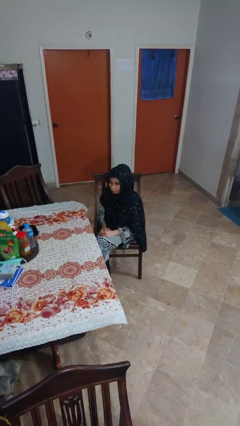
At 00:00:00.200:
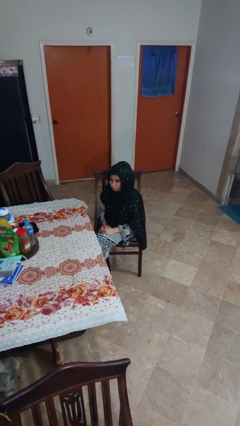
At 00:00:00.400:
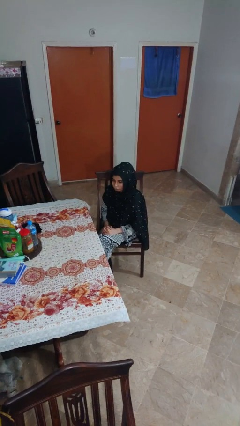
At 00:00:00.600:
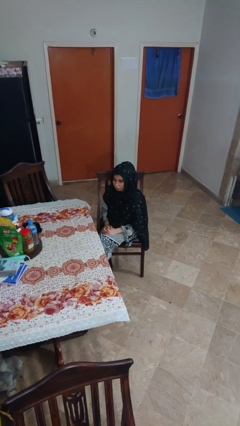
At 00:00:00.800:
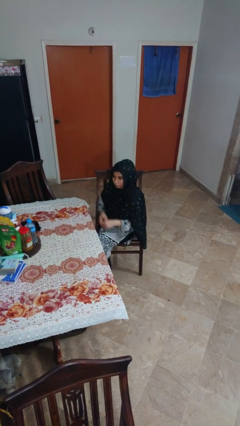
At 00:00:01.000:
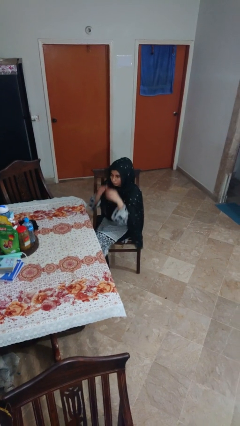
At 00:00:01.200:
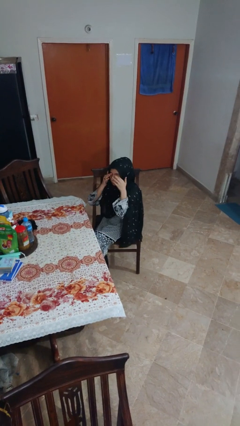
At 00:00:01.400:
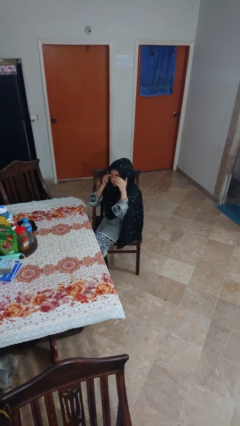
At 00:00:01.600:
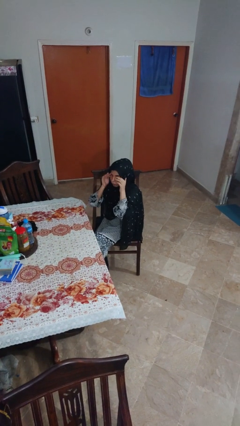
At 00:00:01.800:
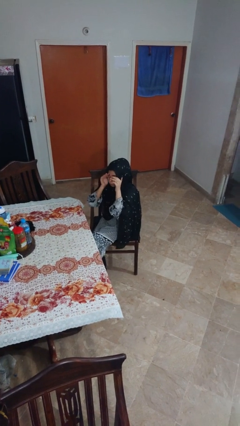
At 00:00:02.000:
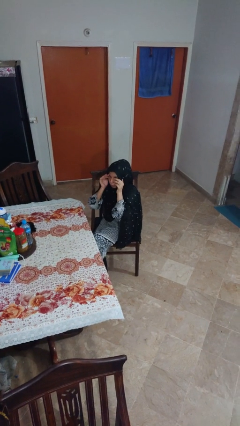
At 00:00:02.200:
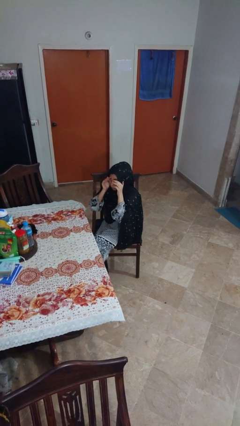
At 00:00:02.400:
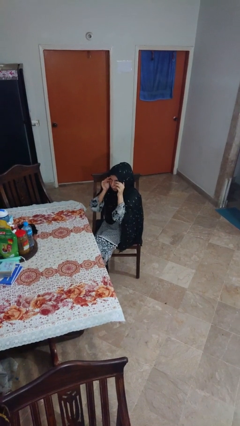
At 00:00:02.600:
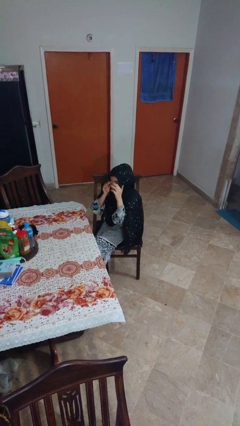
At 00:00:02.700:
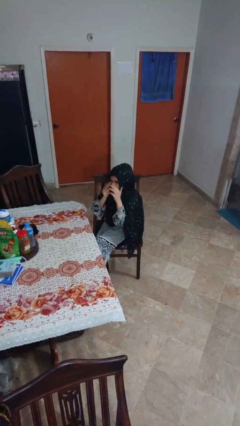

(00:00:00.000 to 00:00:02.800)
person rubs eyes

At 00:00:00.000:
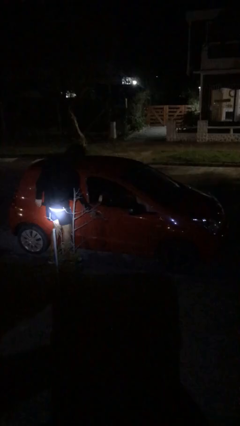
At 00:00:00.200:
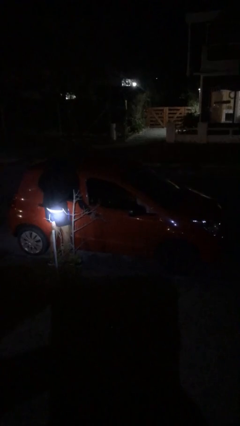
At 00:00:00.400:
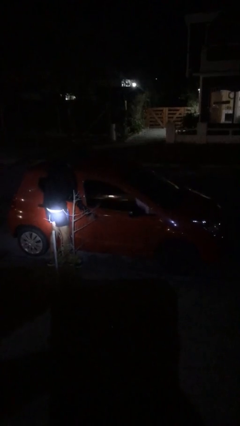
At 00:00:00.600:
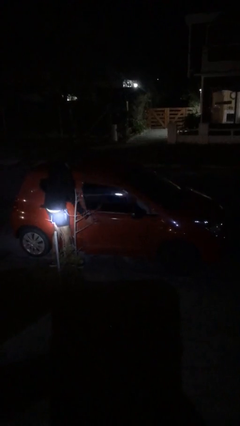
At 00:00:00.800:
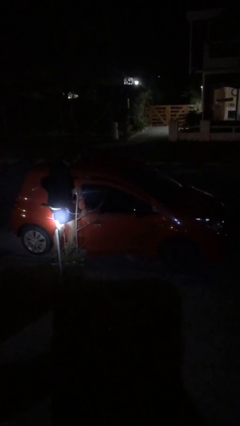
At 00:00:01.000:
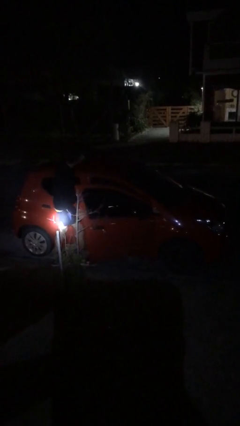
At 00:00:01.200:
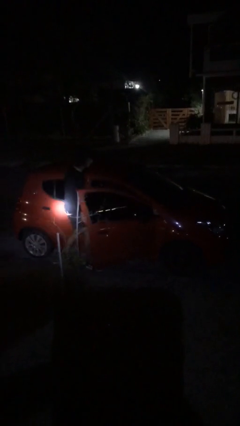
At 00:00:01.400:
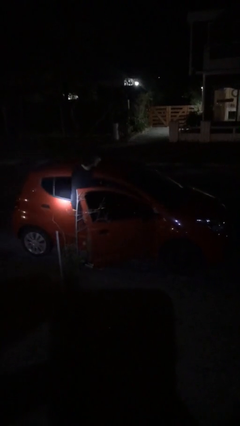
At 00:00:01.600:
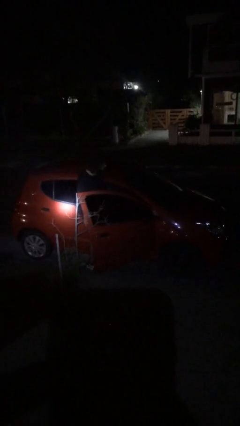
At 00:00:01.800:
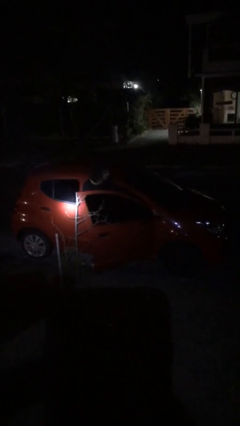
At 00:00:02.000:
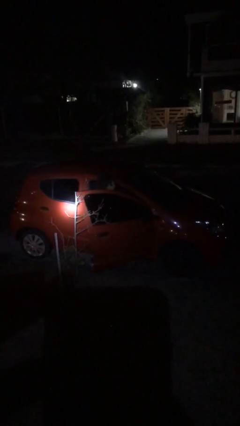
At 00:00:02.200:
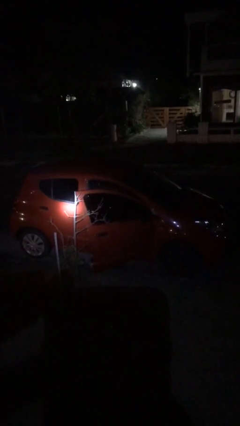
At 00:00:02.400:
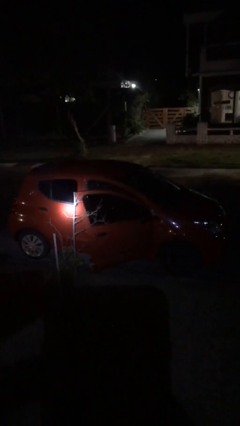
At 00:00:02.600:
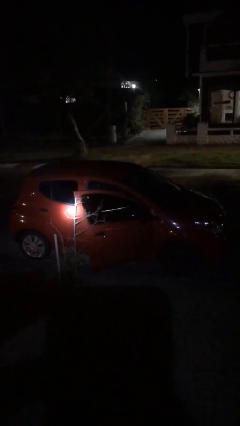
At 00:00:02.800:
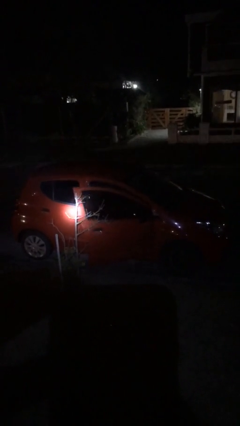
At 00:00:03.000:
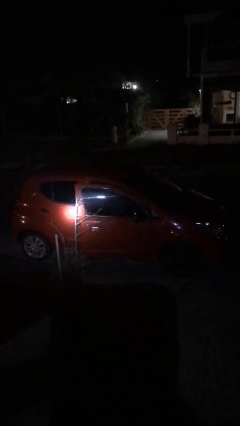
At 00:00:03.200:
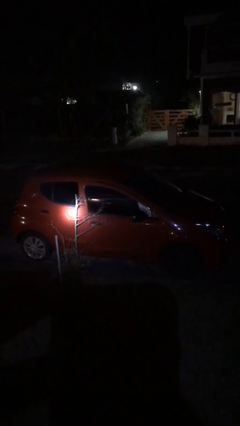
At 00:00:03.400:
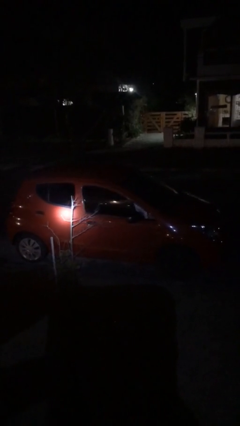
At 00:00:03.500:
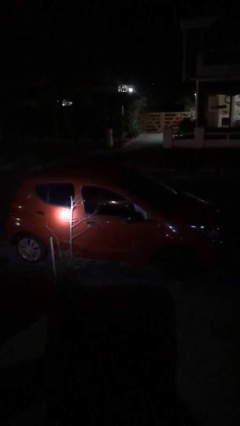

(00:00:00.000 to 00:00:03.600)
car picks up person

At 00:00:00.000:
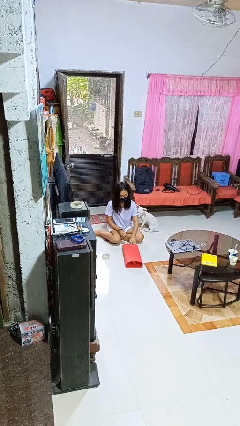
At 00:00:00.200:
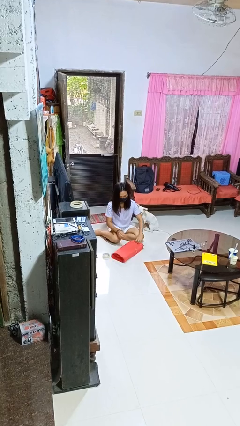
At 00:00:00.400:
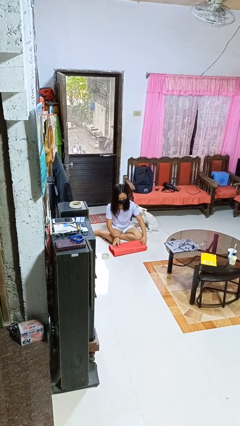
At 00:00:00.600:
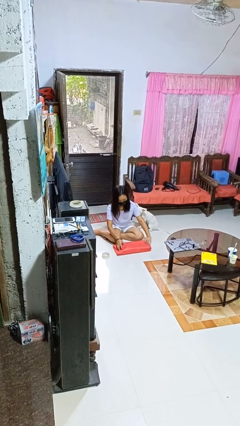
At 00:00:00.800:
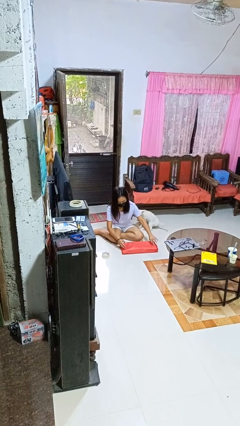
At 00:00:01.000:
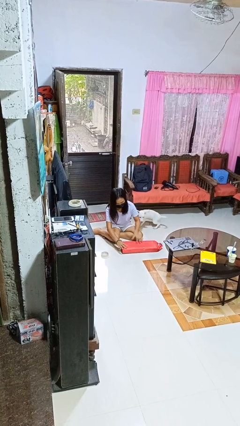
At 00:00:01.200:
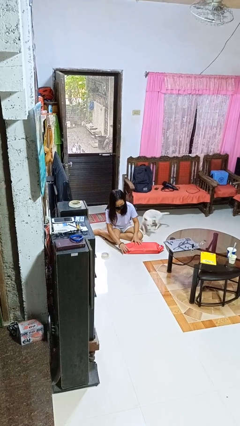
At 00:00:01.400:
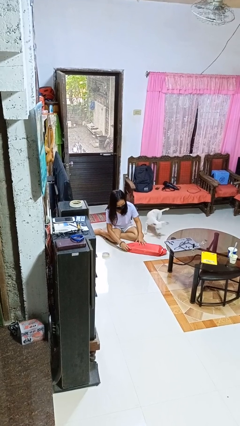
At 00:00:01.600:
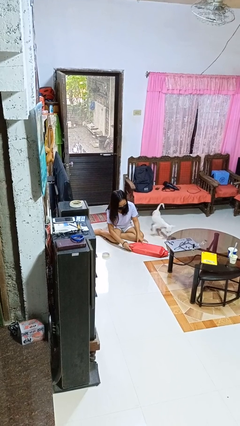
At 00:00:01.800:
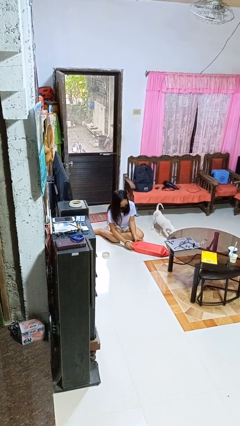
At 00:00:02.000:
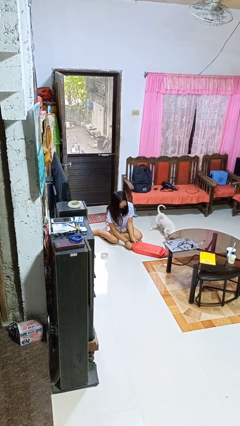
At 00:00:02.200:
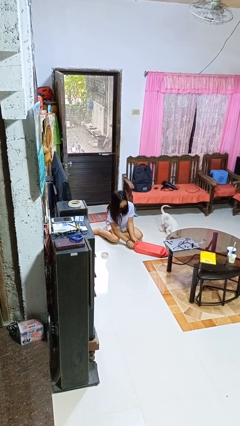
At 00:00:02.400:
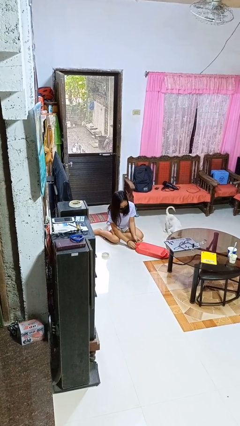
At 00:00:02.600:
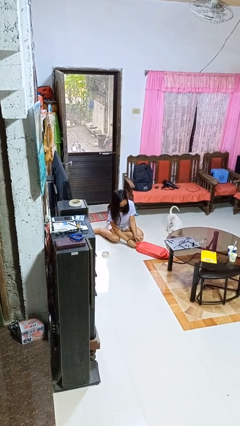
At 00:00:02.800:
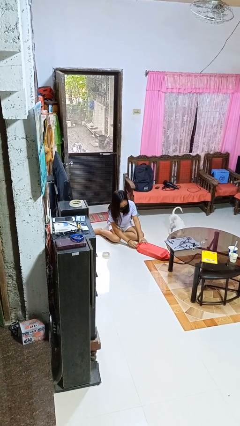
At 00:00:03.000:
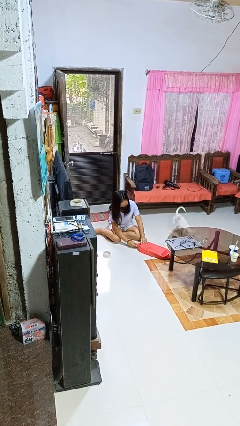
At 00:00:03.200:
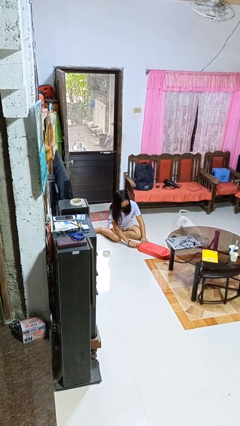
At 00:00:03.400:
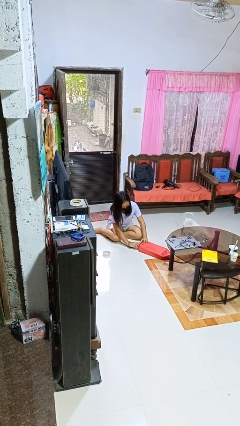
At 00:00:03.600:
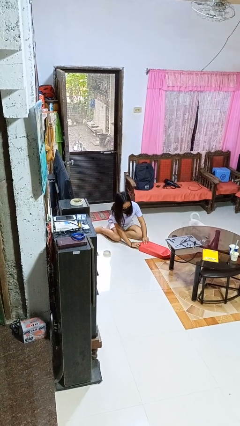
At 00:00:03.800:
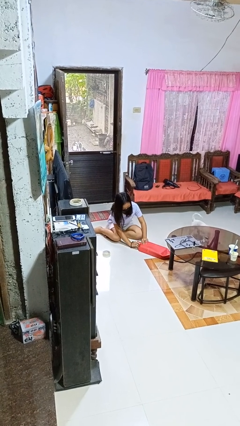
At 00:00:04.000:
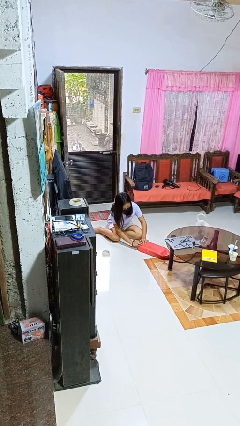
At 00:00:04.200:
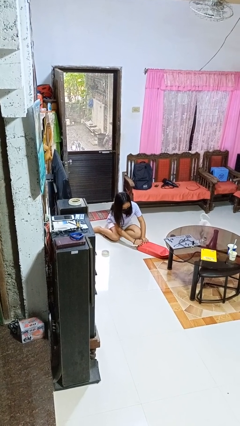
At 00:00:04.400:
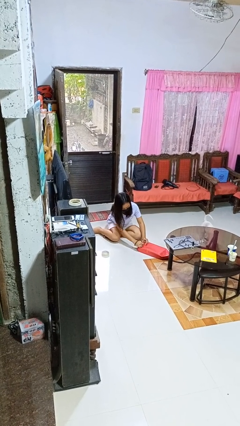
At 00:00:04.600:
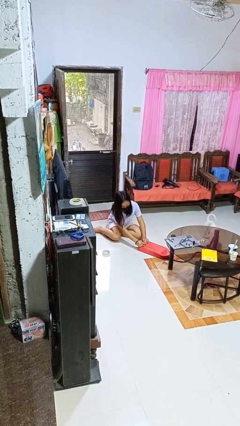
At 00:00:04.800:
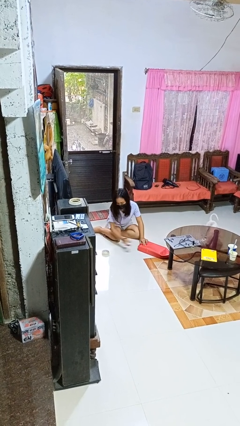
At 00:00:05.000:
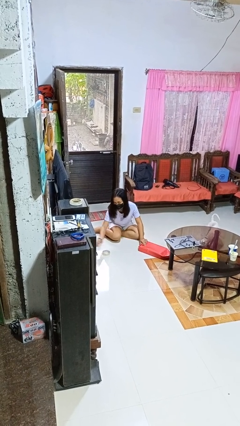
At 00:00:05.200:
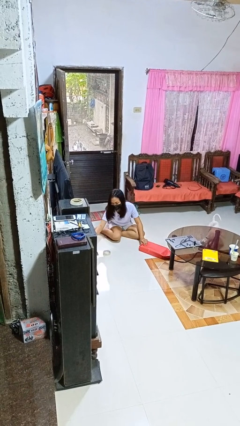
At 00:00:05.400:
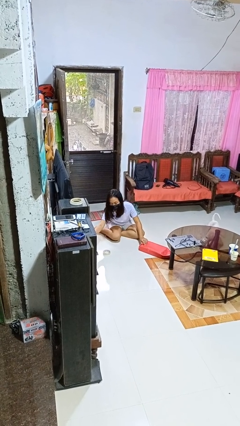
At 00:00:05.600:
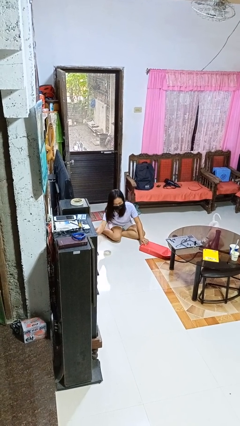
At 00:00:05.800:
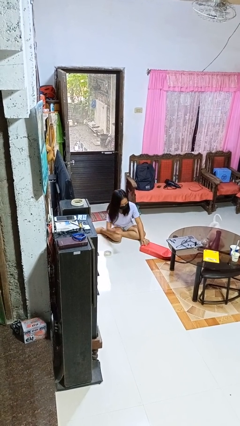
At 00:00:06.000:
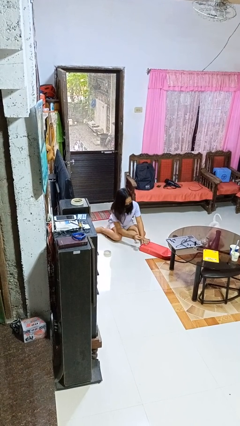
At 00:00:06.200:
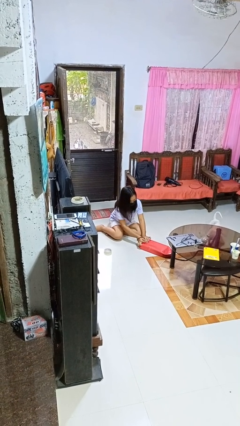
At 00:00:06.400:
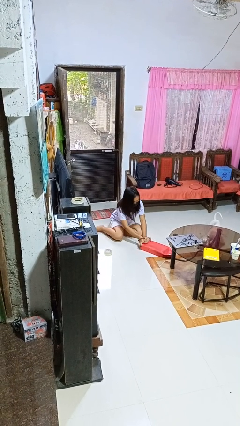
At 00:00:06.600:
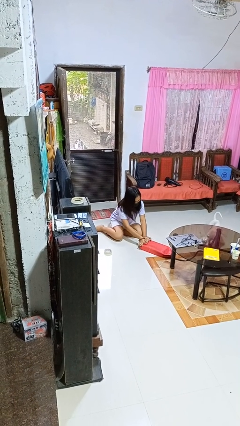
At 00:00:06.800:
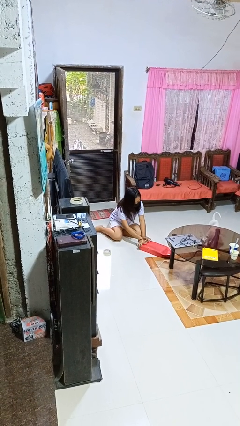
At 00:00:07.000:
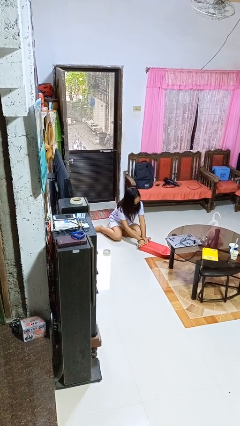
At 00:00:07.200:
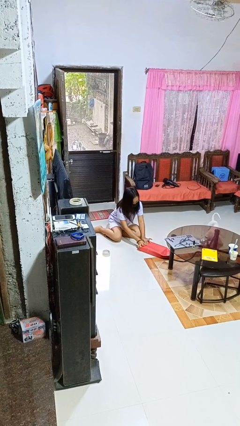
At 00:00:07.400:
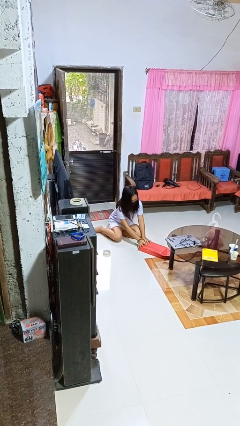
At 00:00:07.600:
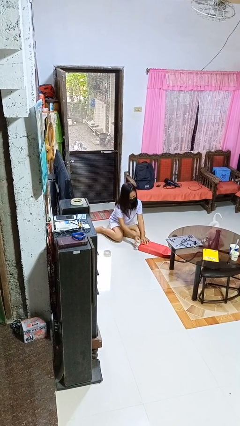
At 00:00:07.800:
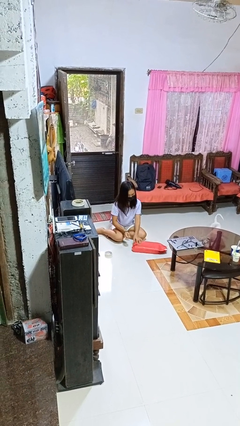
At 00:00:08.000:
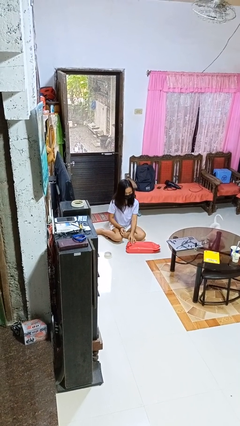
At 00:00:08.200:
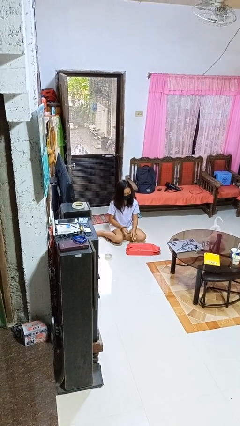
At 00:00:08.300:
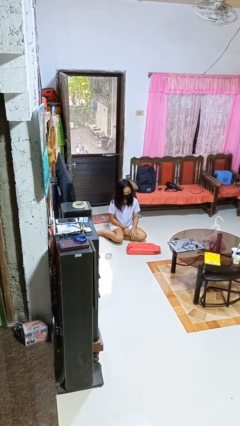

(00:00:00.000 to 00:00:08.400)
person wraps box

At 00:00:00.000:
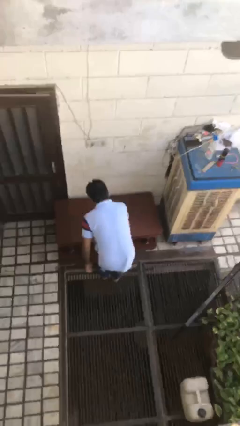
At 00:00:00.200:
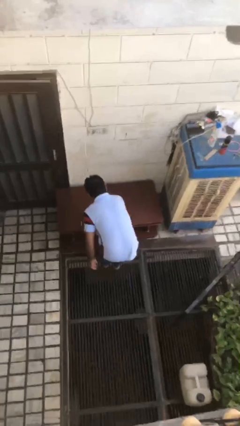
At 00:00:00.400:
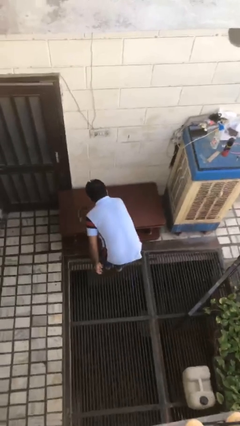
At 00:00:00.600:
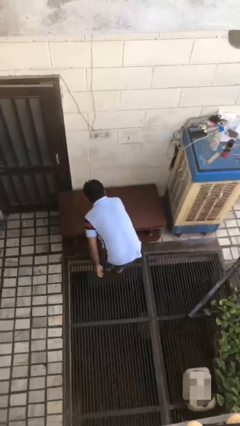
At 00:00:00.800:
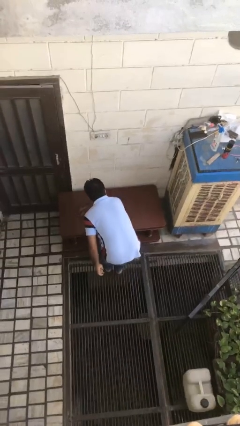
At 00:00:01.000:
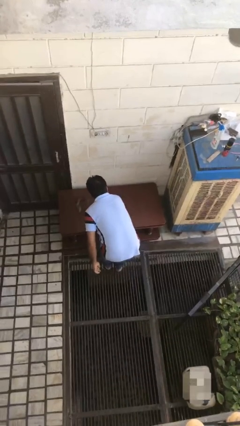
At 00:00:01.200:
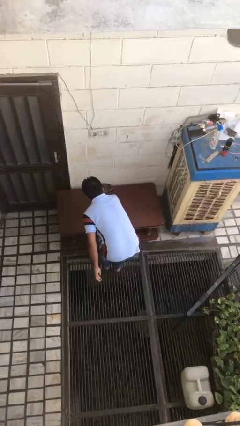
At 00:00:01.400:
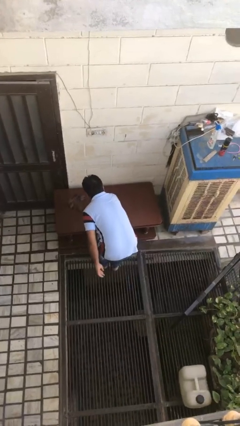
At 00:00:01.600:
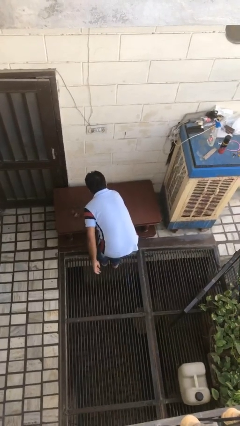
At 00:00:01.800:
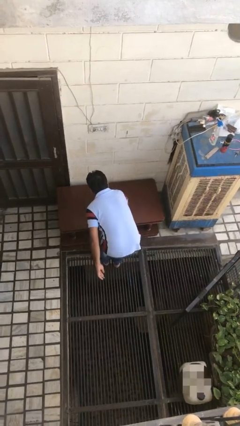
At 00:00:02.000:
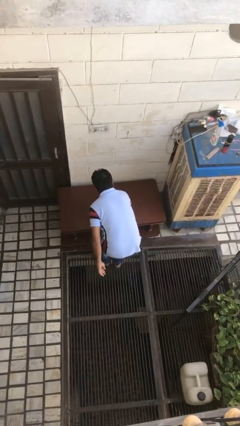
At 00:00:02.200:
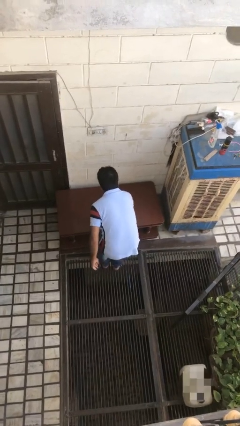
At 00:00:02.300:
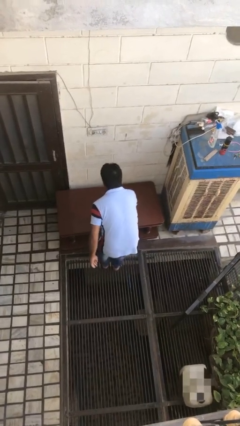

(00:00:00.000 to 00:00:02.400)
person cleans table with rag
